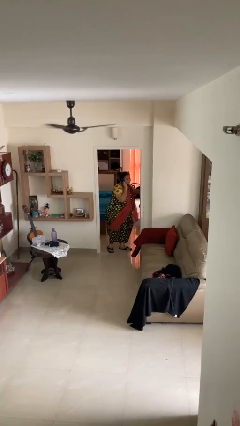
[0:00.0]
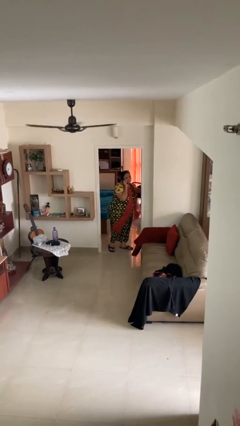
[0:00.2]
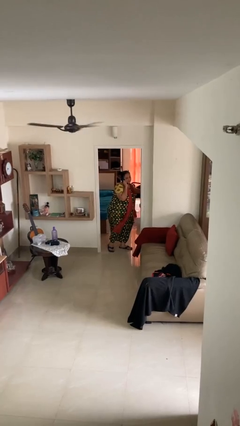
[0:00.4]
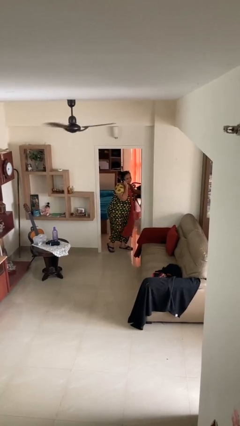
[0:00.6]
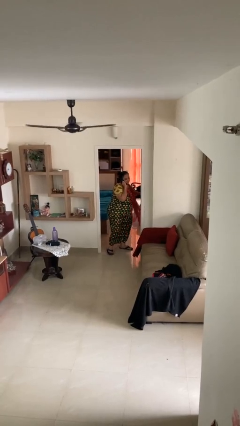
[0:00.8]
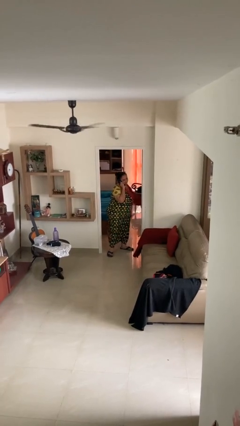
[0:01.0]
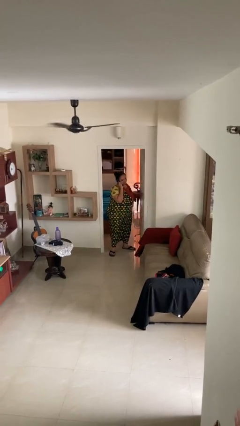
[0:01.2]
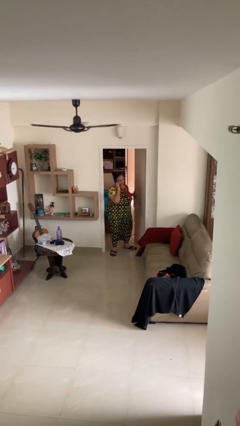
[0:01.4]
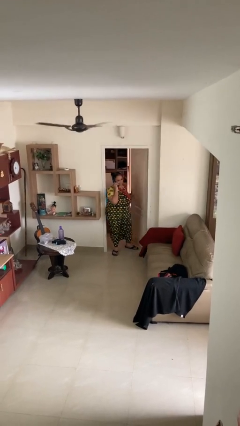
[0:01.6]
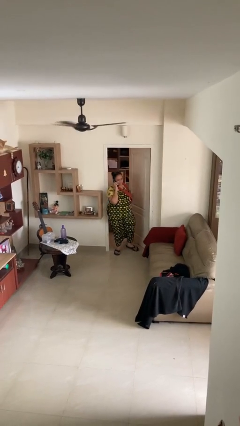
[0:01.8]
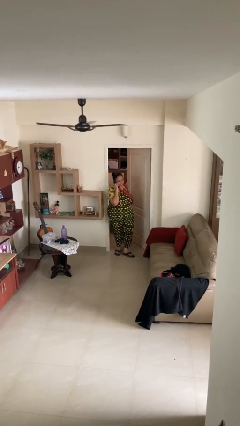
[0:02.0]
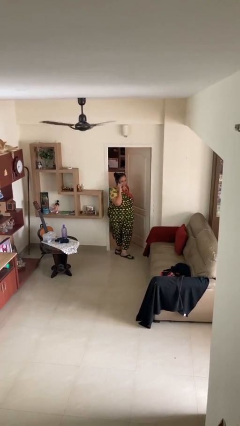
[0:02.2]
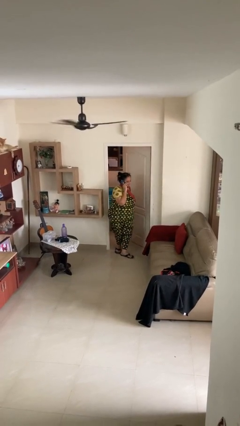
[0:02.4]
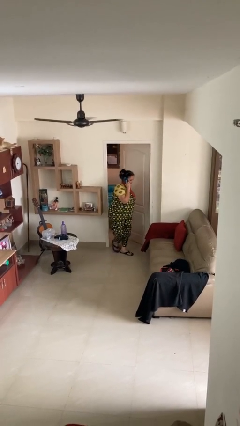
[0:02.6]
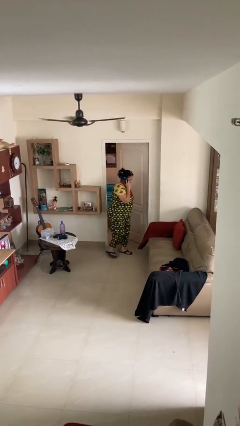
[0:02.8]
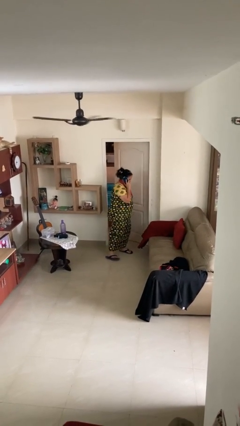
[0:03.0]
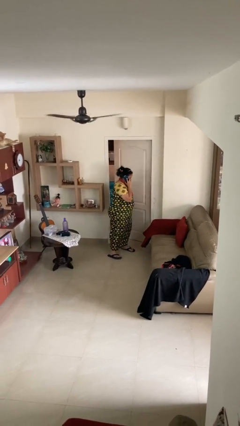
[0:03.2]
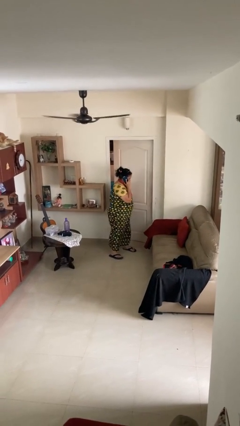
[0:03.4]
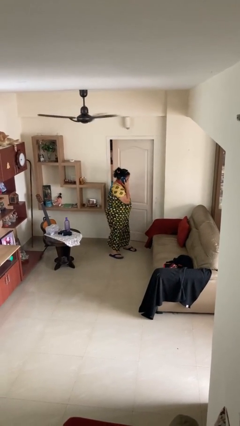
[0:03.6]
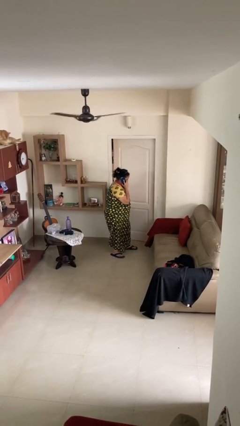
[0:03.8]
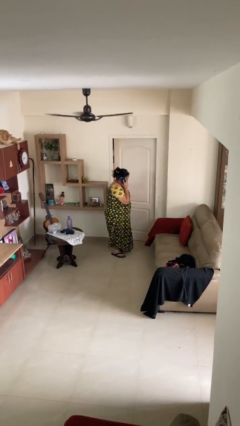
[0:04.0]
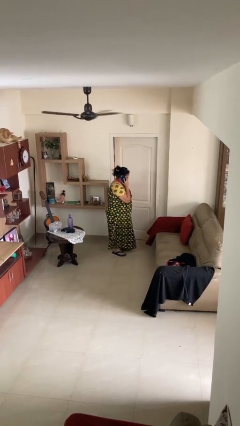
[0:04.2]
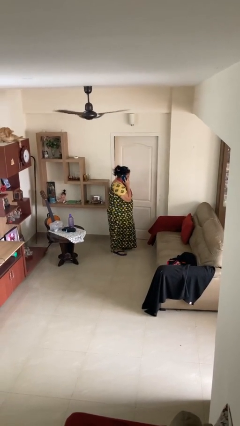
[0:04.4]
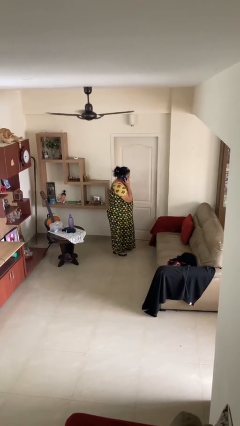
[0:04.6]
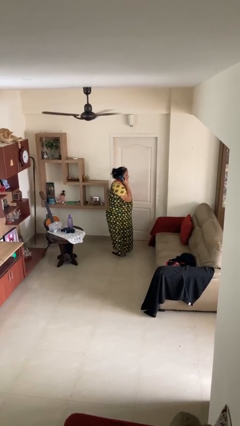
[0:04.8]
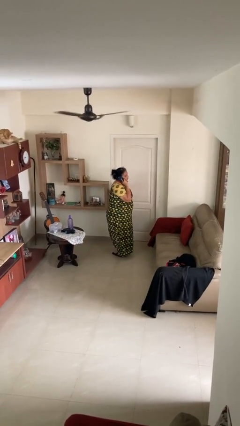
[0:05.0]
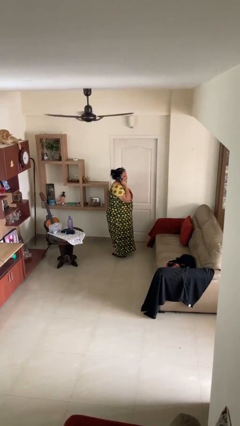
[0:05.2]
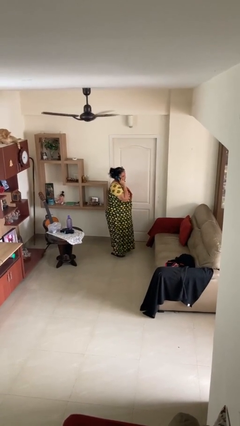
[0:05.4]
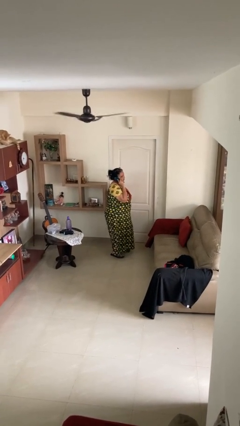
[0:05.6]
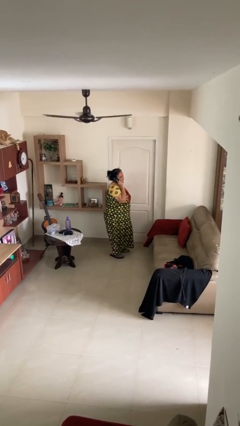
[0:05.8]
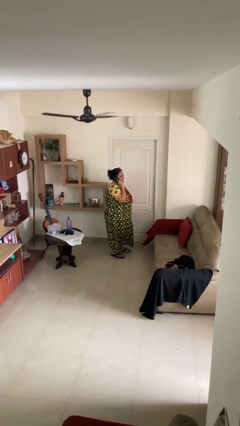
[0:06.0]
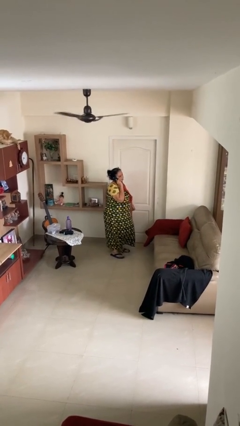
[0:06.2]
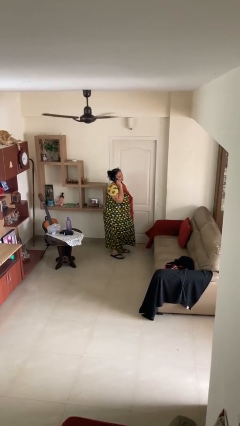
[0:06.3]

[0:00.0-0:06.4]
person closes facility door

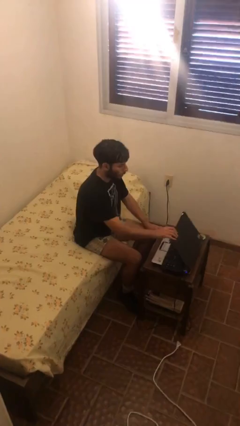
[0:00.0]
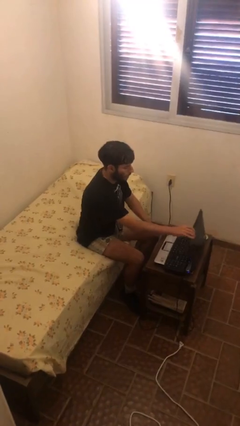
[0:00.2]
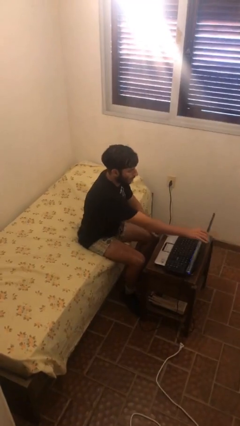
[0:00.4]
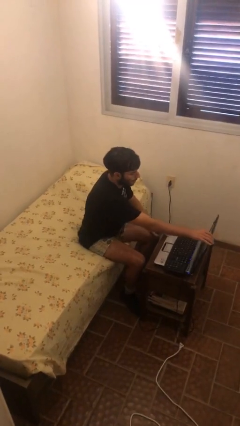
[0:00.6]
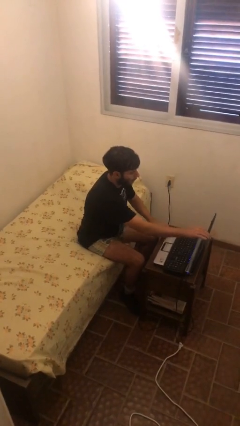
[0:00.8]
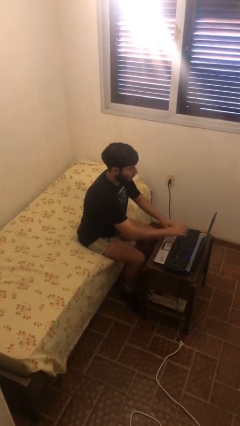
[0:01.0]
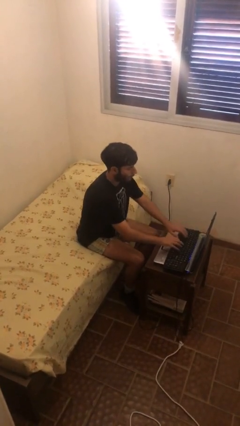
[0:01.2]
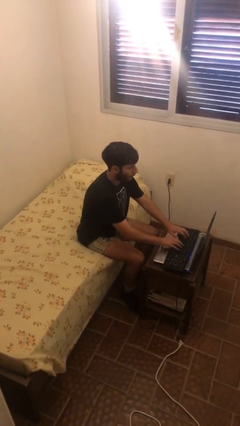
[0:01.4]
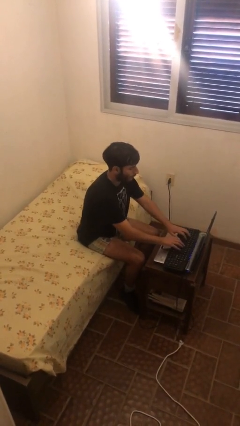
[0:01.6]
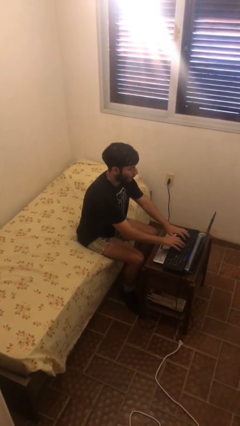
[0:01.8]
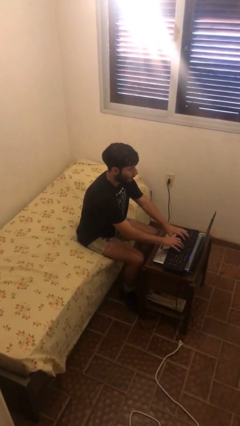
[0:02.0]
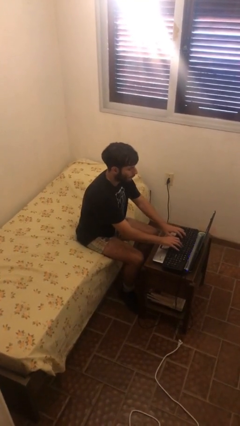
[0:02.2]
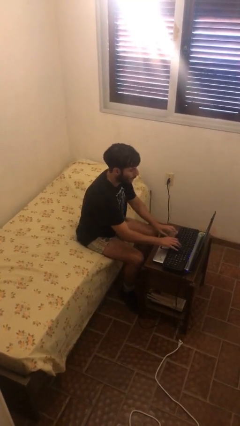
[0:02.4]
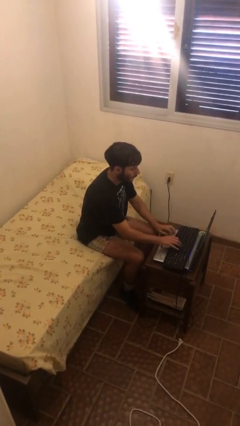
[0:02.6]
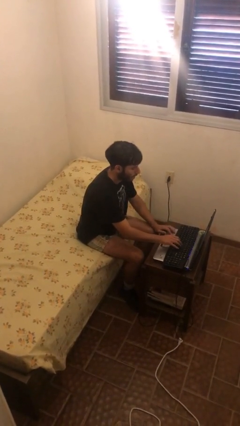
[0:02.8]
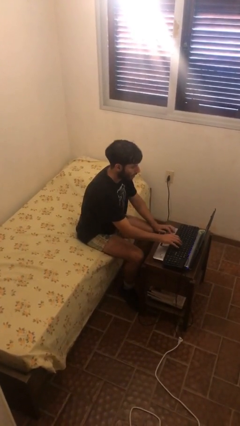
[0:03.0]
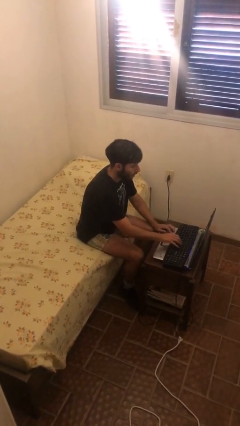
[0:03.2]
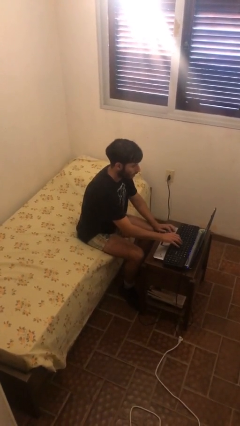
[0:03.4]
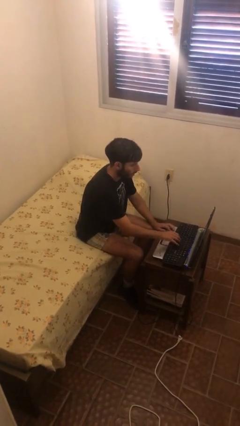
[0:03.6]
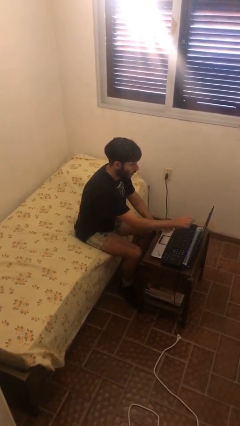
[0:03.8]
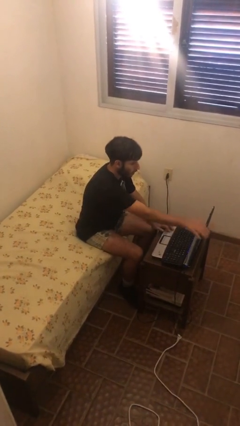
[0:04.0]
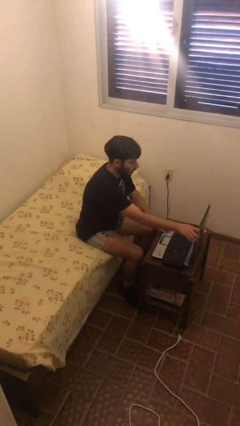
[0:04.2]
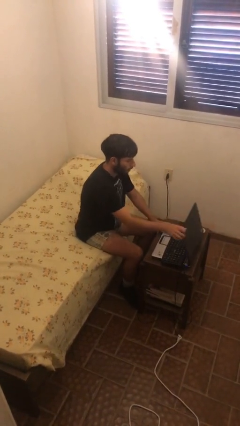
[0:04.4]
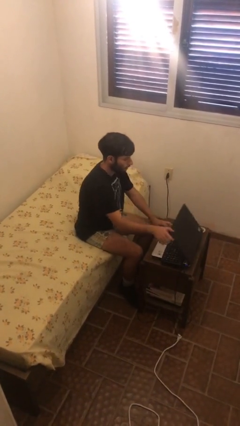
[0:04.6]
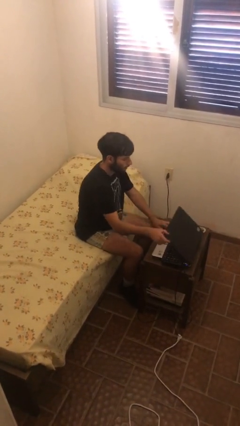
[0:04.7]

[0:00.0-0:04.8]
person interacts with laptop

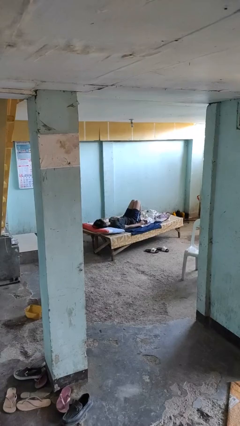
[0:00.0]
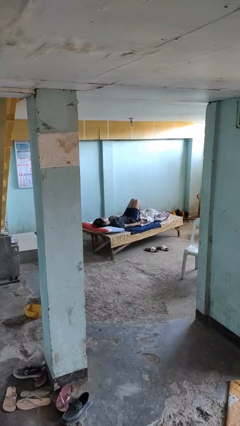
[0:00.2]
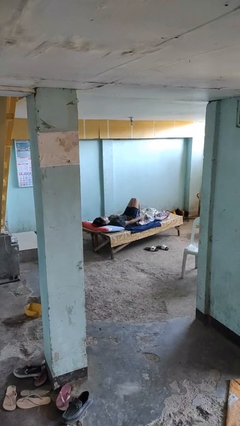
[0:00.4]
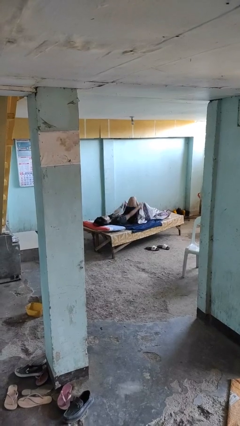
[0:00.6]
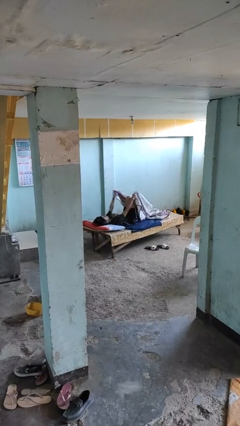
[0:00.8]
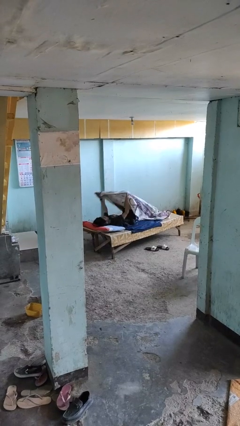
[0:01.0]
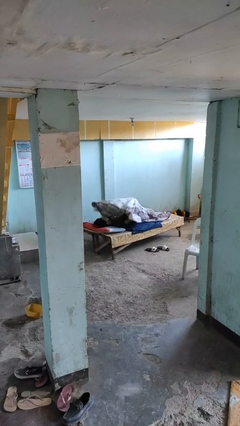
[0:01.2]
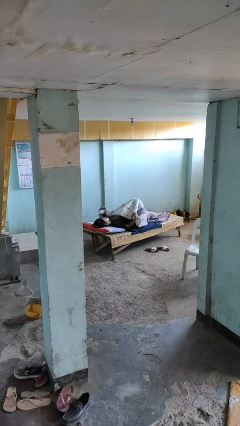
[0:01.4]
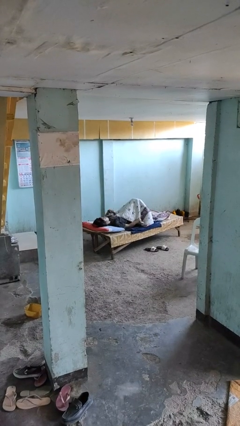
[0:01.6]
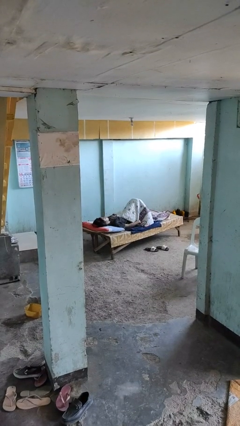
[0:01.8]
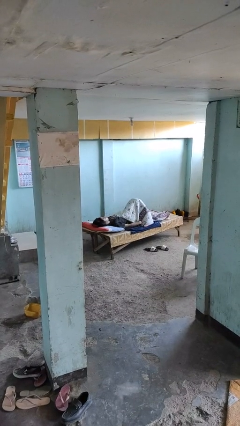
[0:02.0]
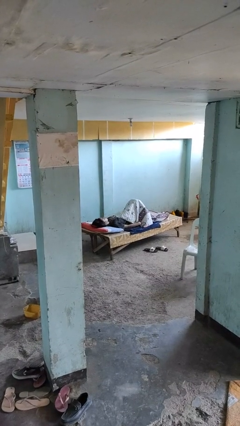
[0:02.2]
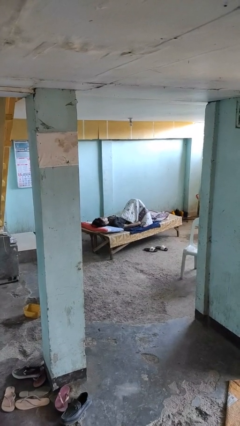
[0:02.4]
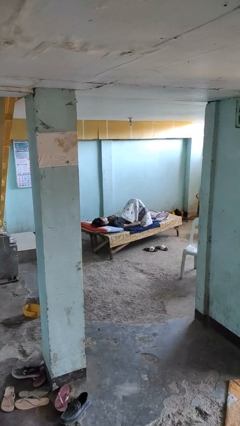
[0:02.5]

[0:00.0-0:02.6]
person covers with bedsheets

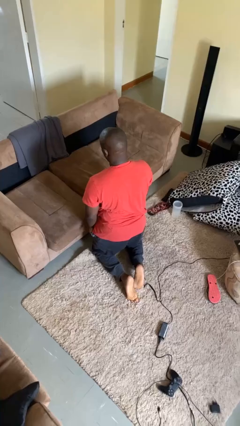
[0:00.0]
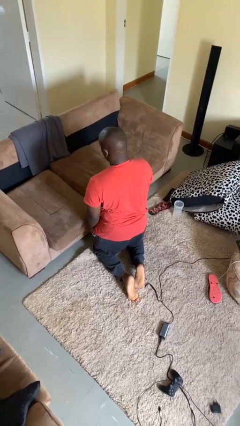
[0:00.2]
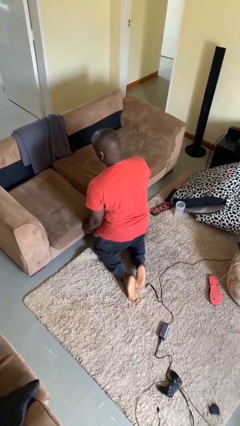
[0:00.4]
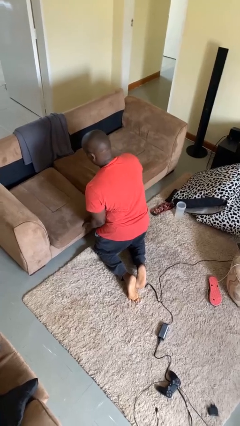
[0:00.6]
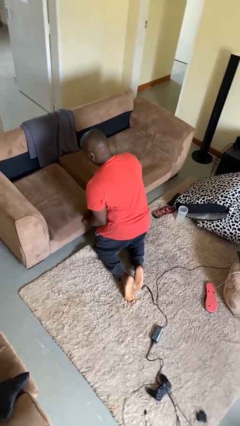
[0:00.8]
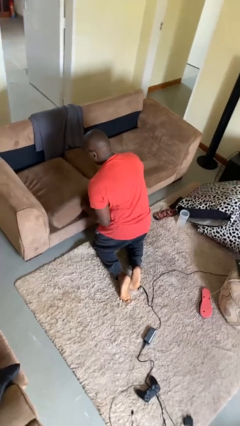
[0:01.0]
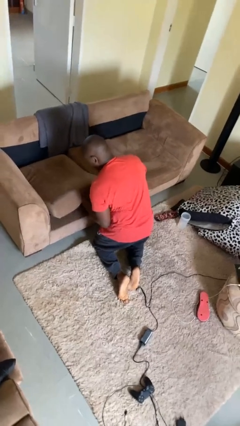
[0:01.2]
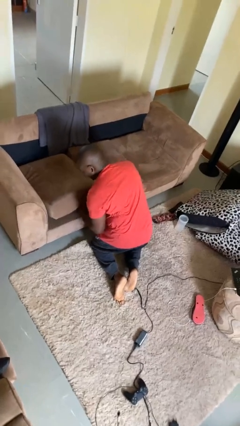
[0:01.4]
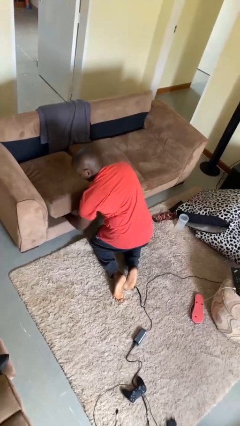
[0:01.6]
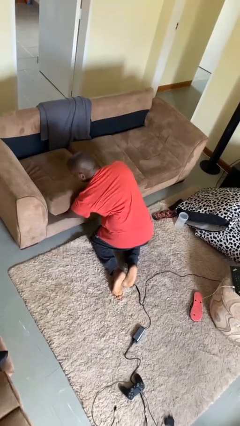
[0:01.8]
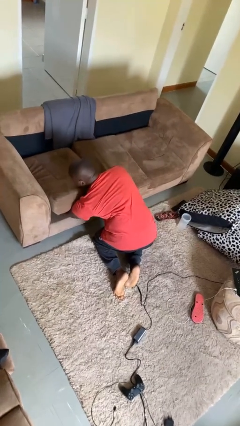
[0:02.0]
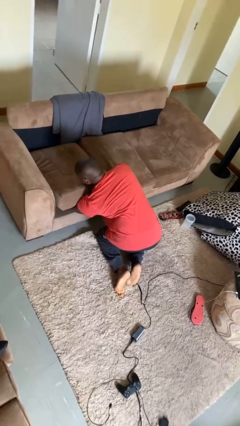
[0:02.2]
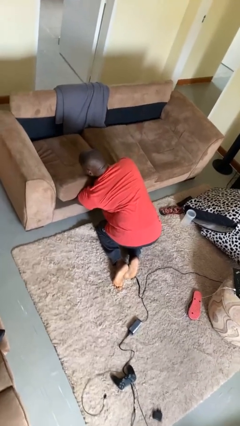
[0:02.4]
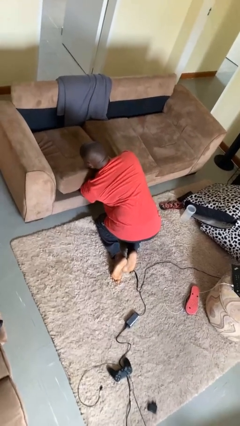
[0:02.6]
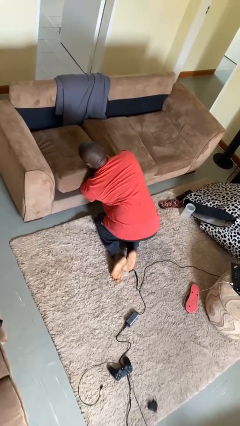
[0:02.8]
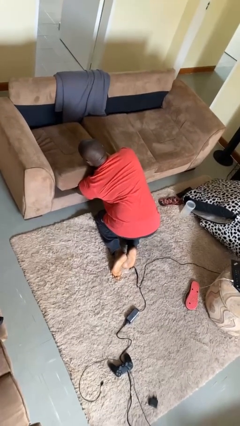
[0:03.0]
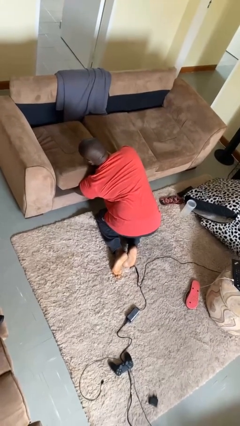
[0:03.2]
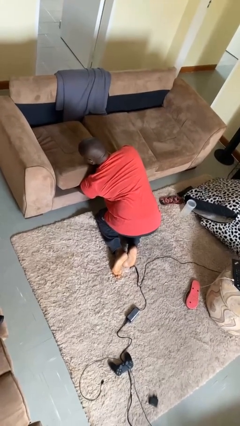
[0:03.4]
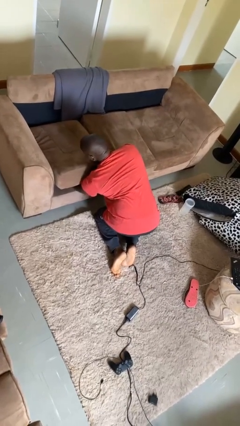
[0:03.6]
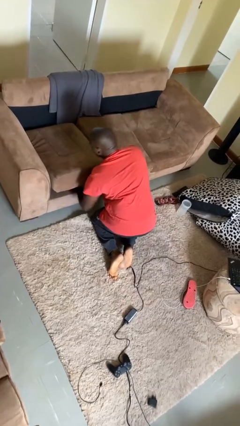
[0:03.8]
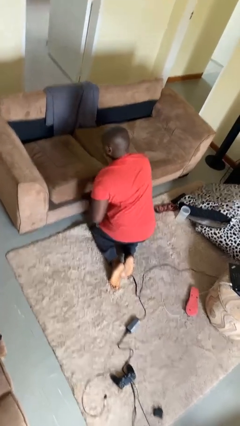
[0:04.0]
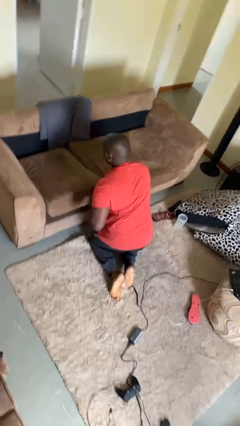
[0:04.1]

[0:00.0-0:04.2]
person searches under couch
